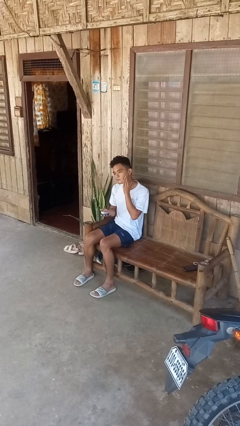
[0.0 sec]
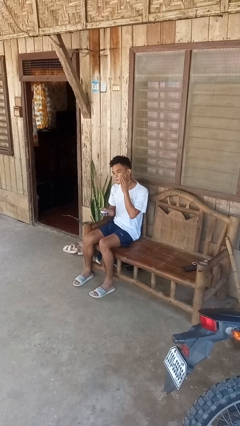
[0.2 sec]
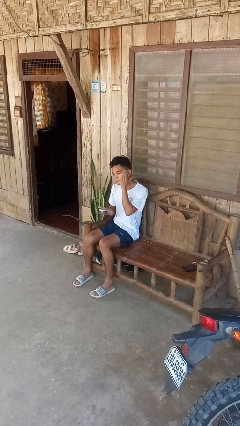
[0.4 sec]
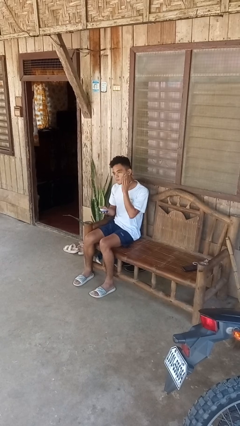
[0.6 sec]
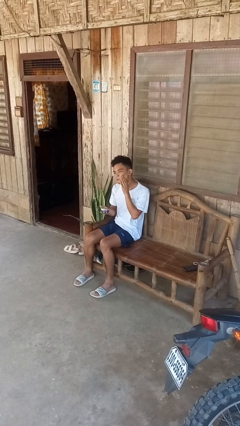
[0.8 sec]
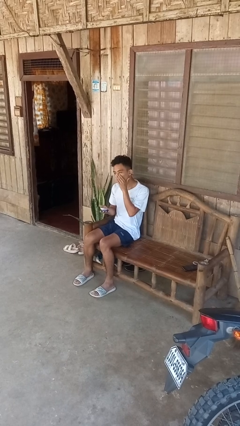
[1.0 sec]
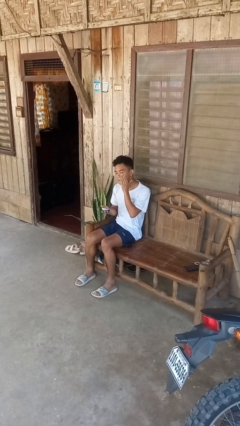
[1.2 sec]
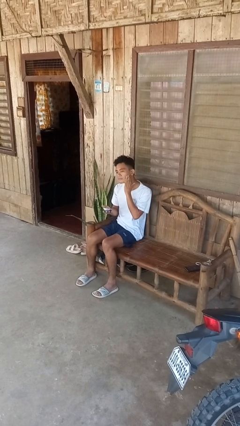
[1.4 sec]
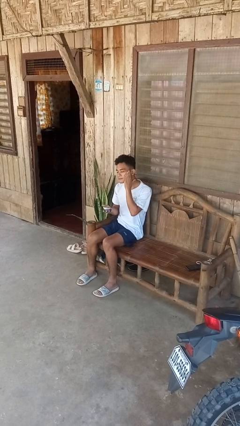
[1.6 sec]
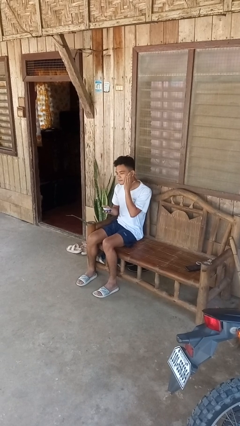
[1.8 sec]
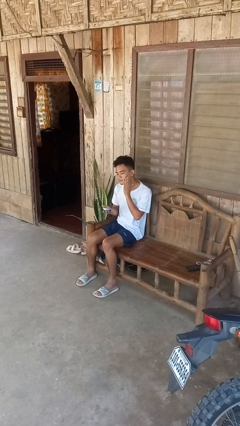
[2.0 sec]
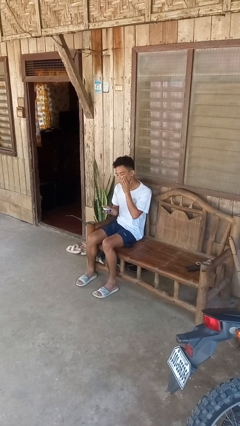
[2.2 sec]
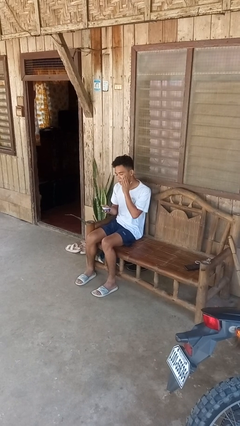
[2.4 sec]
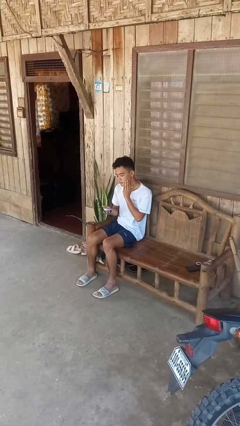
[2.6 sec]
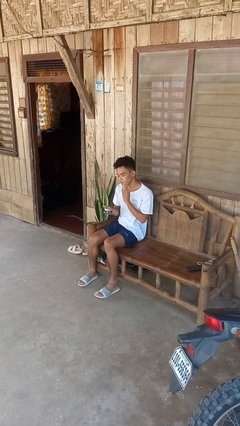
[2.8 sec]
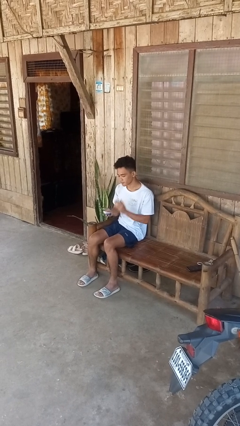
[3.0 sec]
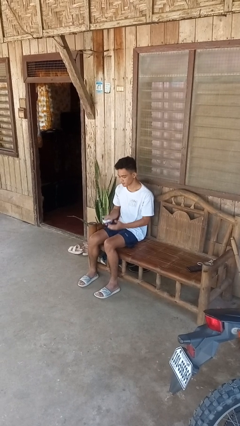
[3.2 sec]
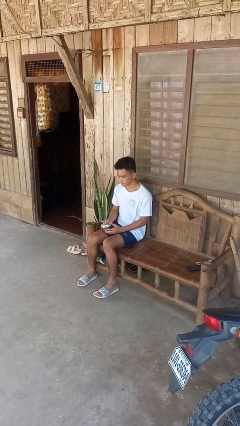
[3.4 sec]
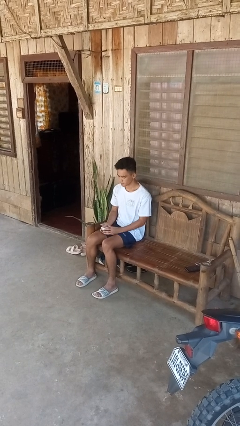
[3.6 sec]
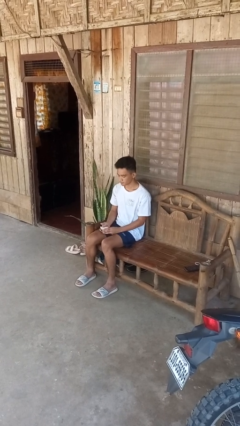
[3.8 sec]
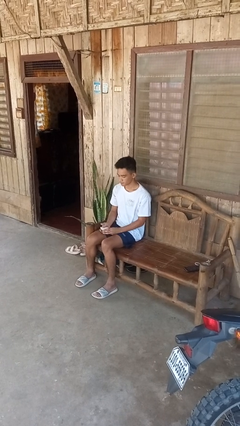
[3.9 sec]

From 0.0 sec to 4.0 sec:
person applies facial moisturizer

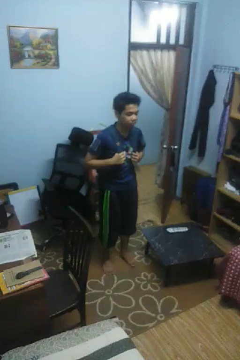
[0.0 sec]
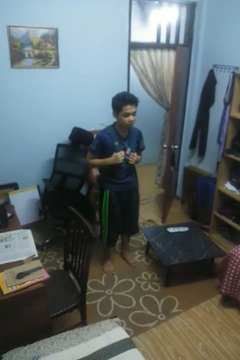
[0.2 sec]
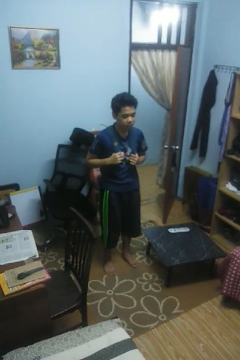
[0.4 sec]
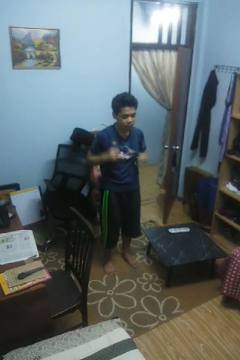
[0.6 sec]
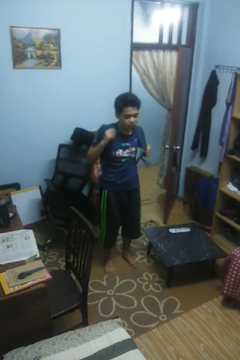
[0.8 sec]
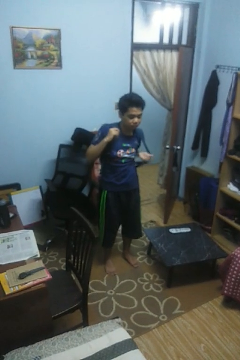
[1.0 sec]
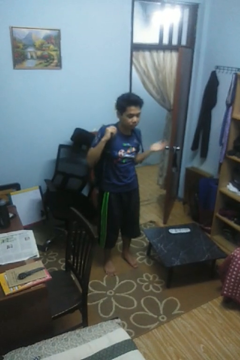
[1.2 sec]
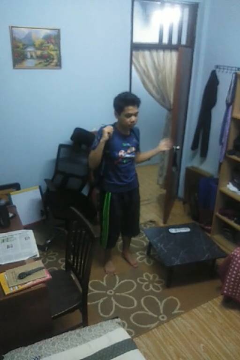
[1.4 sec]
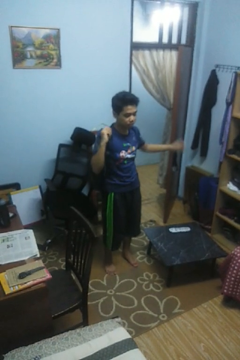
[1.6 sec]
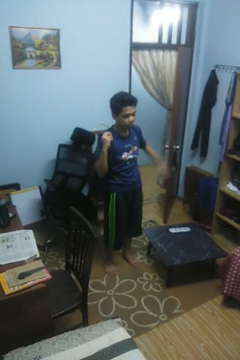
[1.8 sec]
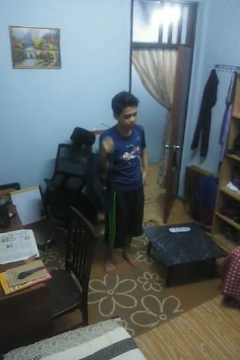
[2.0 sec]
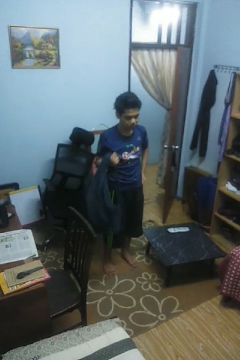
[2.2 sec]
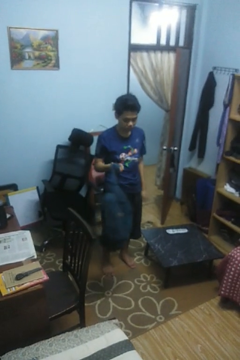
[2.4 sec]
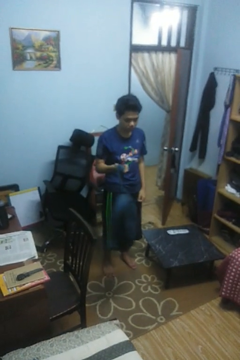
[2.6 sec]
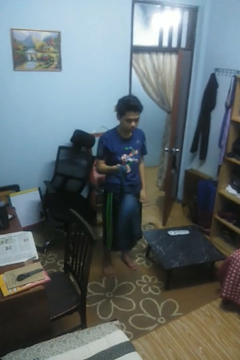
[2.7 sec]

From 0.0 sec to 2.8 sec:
person takes off backpack

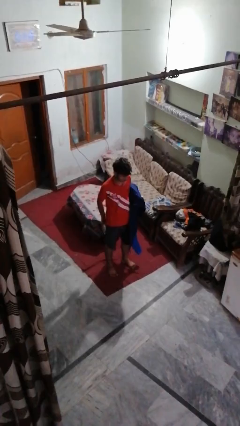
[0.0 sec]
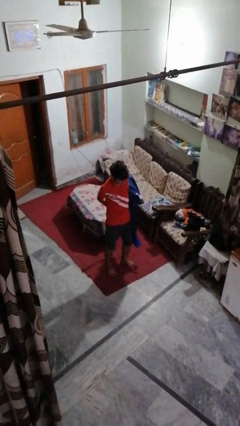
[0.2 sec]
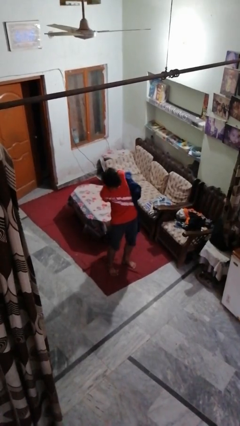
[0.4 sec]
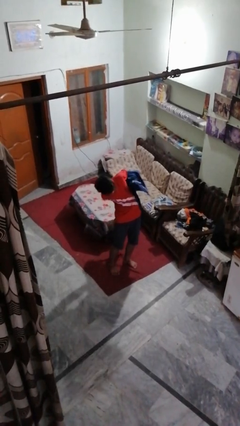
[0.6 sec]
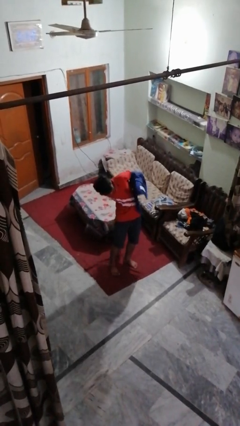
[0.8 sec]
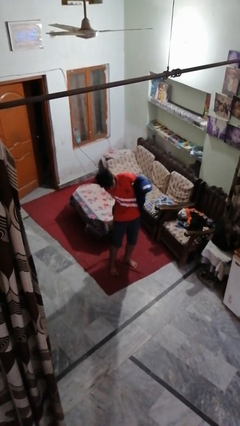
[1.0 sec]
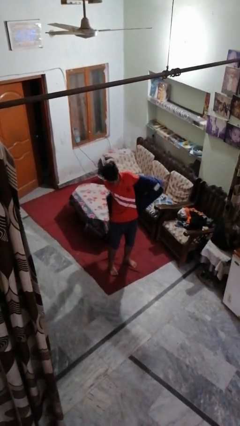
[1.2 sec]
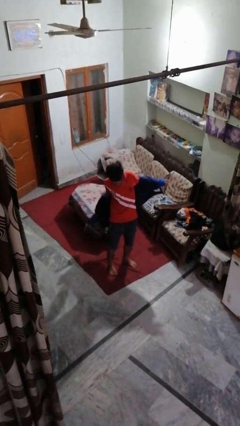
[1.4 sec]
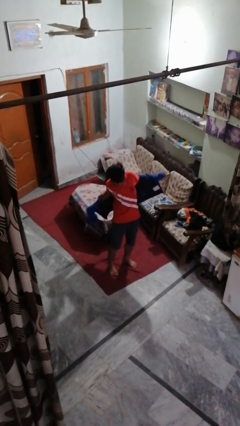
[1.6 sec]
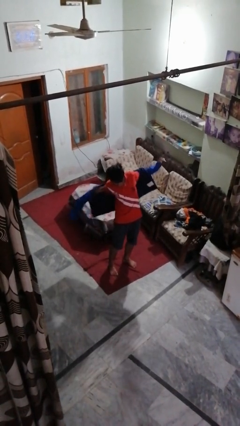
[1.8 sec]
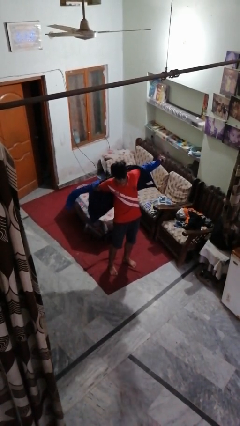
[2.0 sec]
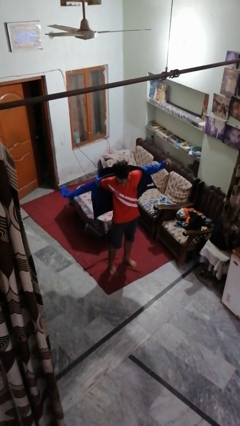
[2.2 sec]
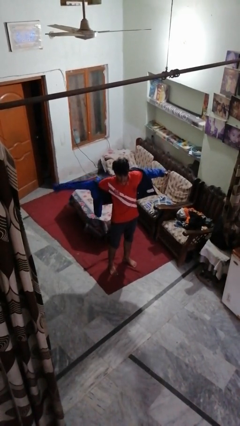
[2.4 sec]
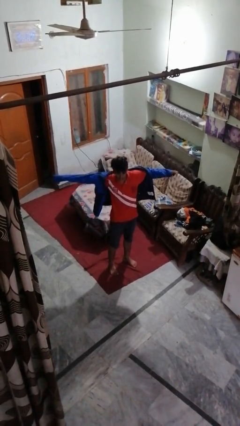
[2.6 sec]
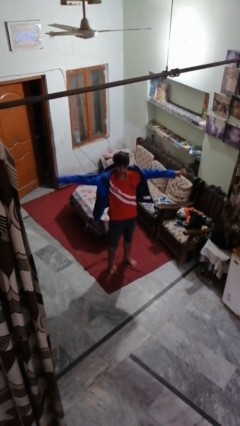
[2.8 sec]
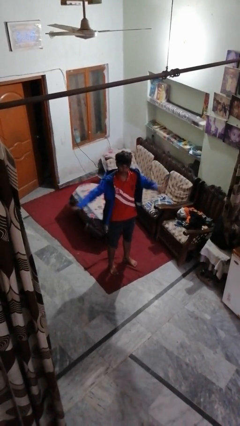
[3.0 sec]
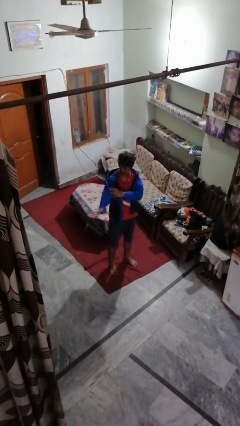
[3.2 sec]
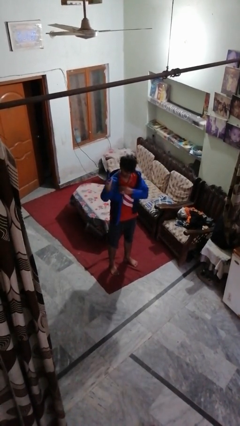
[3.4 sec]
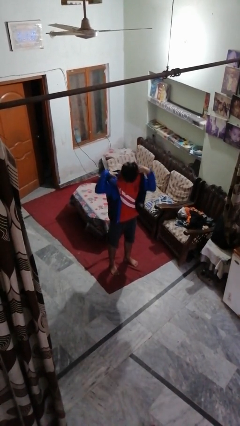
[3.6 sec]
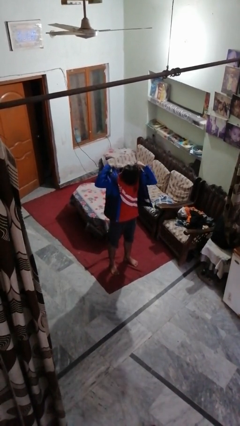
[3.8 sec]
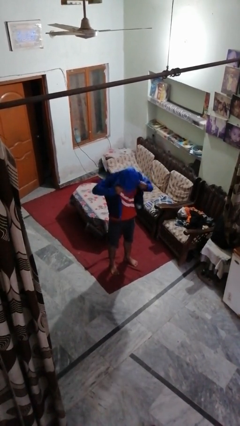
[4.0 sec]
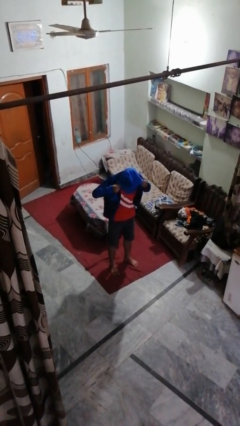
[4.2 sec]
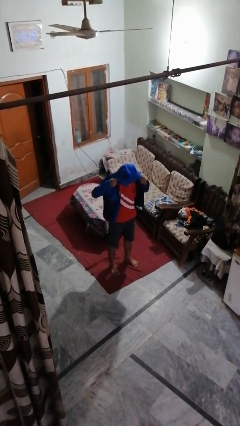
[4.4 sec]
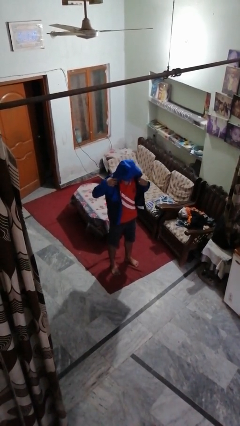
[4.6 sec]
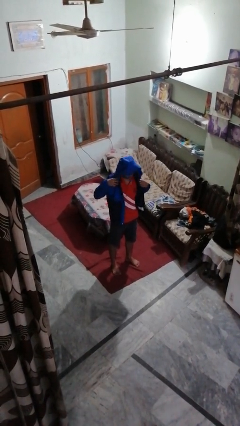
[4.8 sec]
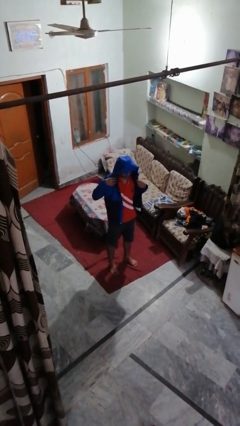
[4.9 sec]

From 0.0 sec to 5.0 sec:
person puts on hoodie

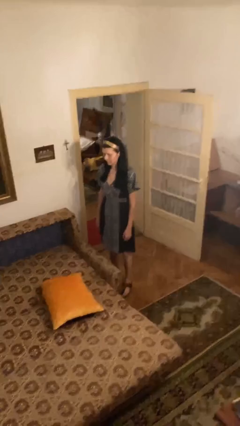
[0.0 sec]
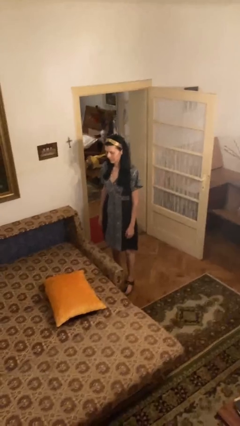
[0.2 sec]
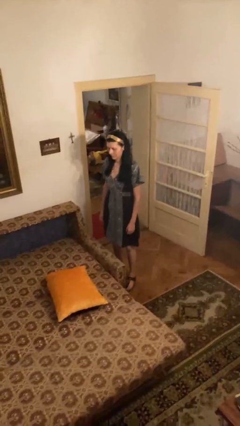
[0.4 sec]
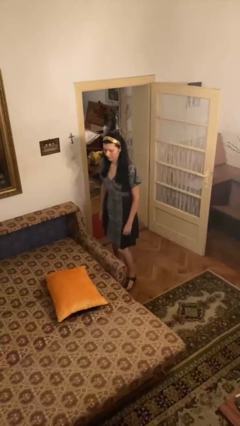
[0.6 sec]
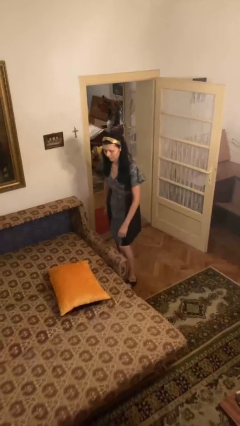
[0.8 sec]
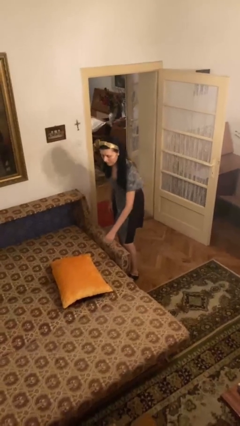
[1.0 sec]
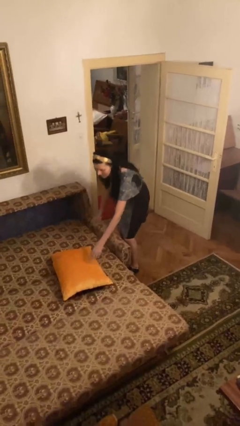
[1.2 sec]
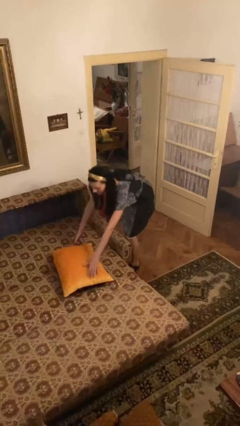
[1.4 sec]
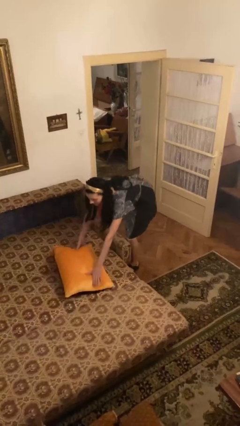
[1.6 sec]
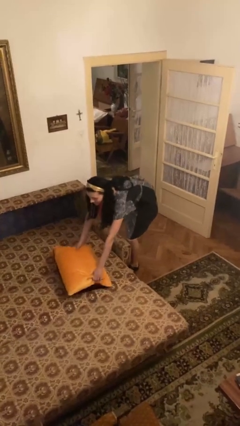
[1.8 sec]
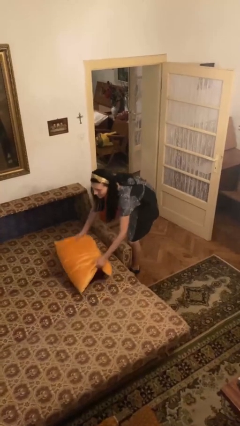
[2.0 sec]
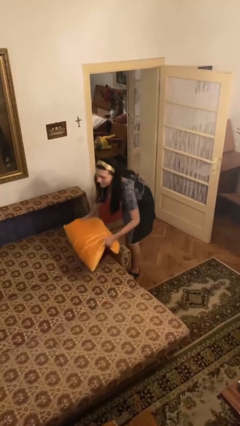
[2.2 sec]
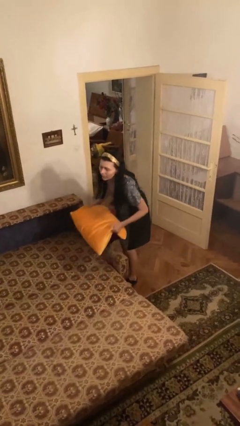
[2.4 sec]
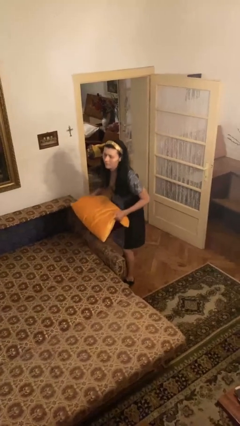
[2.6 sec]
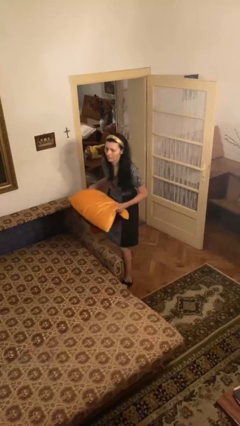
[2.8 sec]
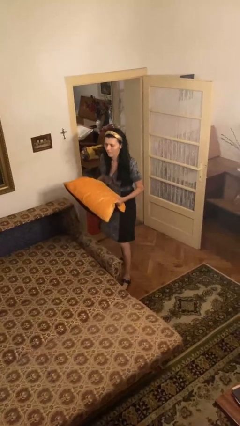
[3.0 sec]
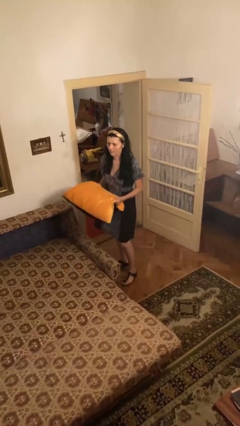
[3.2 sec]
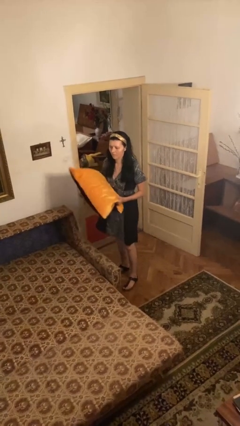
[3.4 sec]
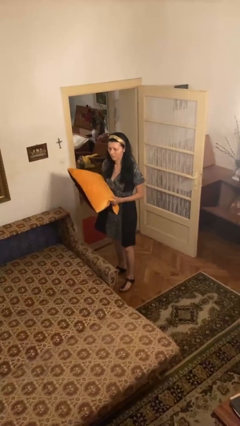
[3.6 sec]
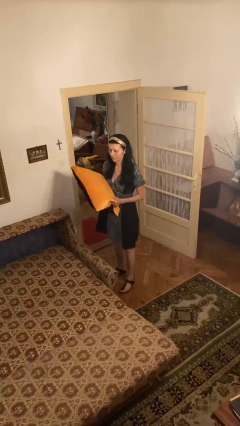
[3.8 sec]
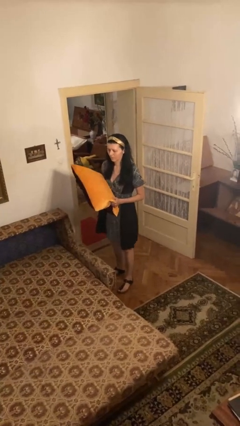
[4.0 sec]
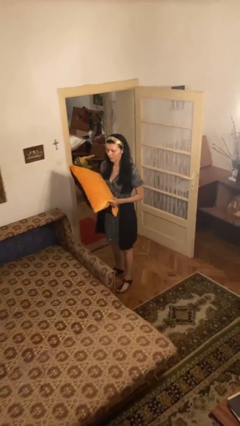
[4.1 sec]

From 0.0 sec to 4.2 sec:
person picks up object from bed

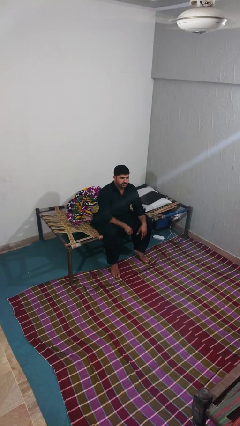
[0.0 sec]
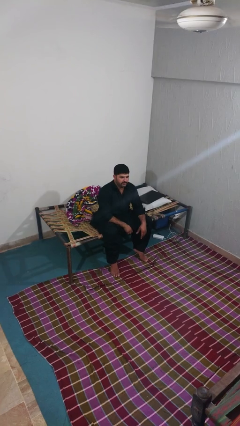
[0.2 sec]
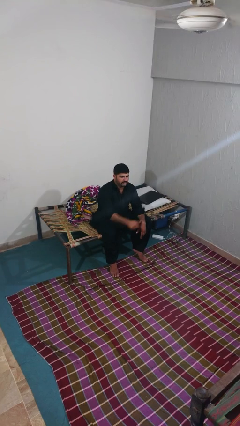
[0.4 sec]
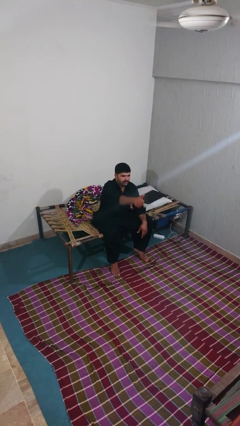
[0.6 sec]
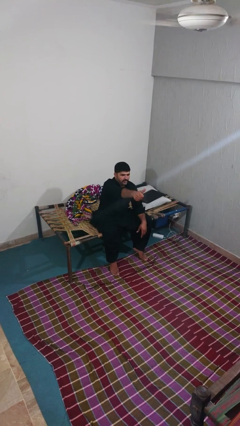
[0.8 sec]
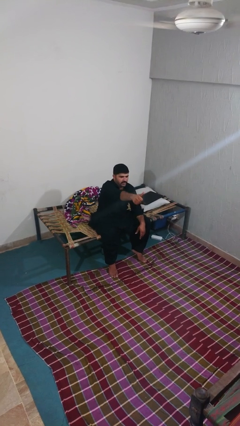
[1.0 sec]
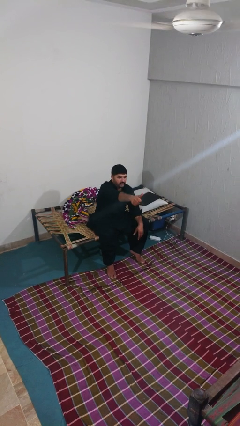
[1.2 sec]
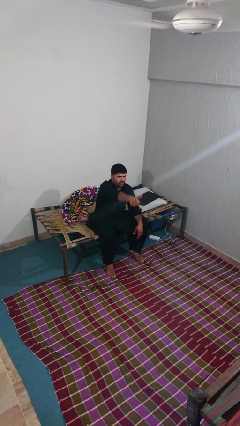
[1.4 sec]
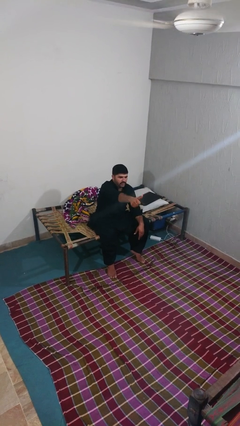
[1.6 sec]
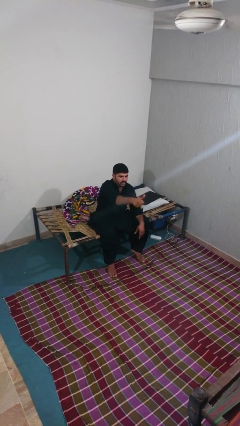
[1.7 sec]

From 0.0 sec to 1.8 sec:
person gestures thumbs up

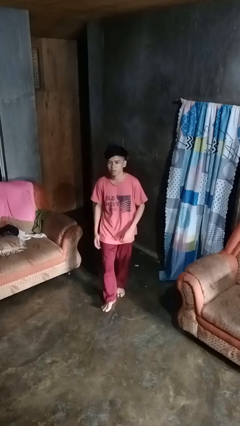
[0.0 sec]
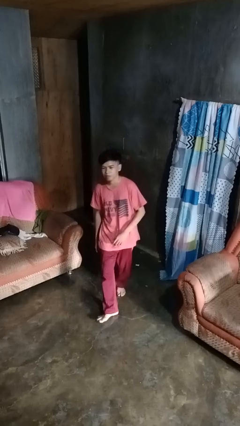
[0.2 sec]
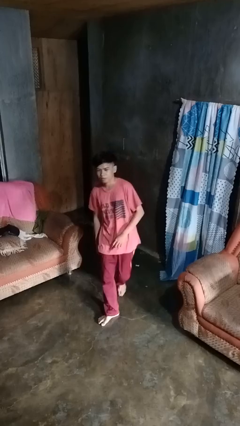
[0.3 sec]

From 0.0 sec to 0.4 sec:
person karate kicks
